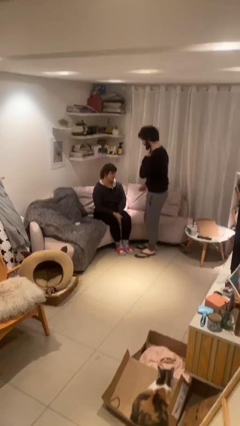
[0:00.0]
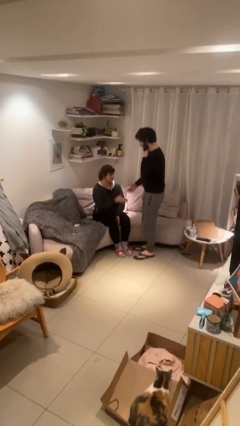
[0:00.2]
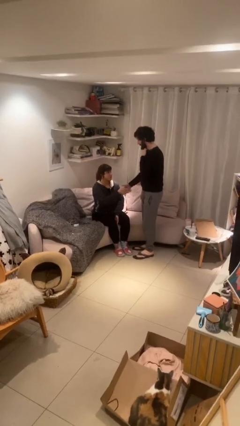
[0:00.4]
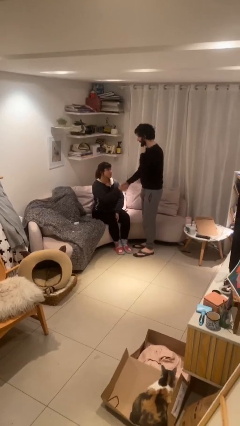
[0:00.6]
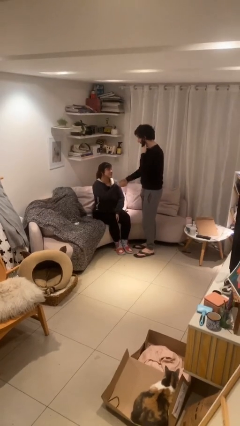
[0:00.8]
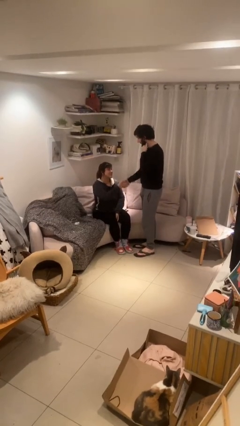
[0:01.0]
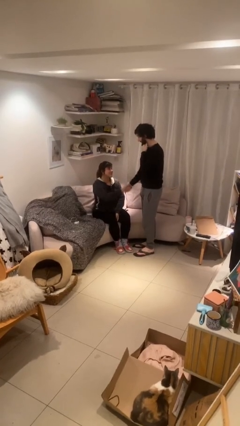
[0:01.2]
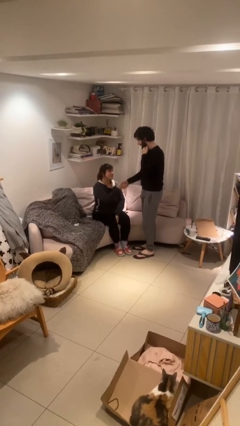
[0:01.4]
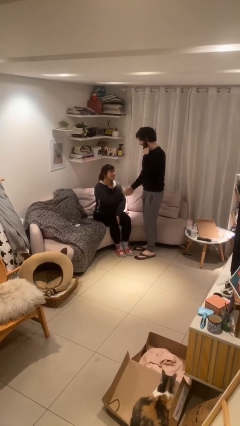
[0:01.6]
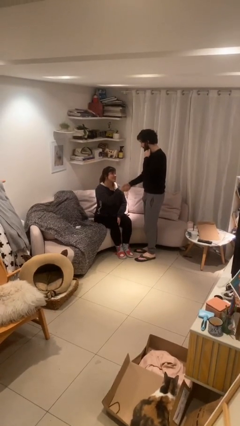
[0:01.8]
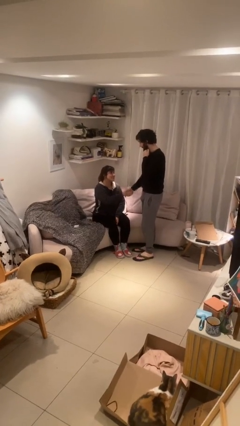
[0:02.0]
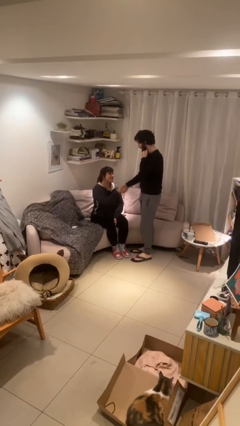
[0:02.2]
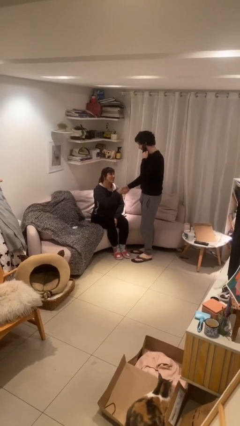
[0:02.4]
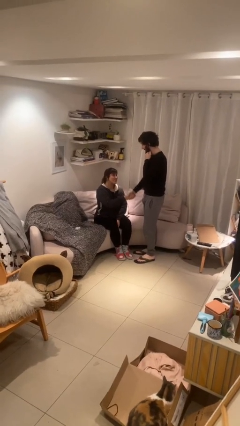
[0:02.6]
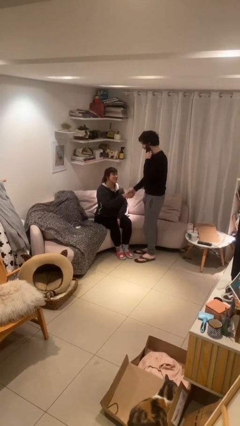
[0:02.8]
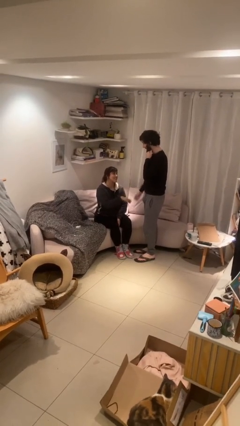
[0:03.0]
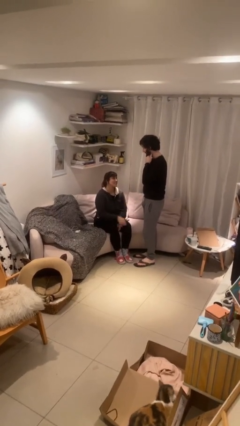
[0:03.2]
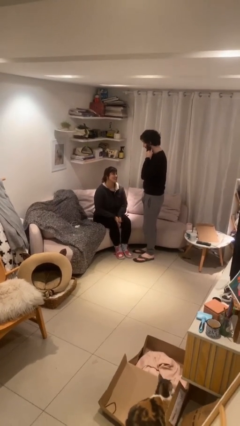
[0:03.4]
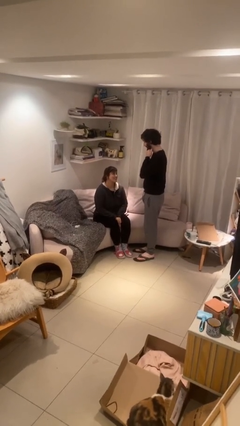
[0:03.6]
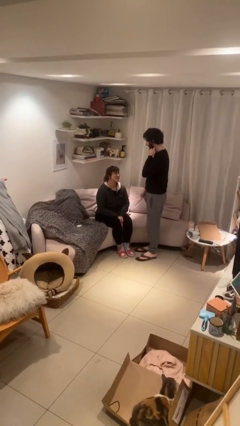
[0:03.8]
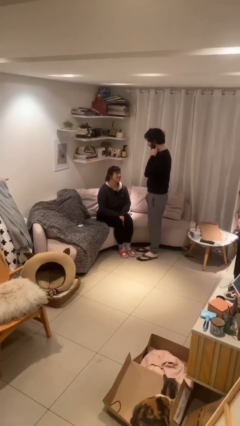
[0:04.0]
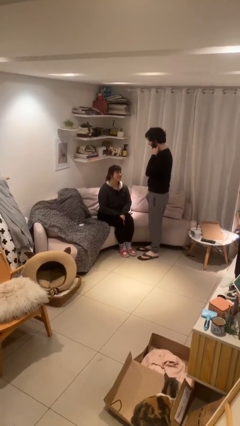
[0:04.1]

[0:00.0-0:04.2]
person shakes hand

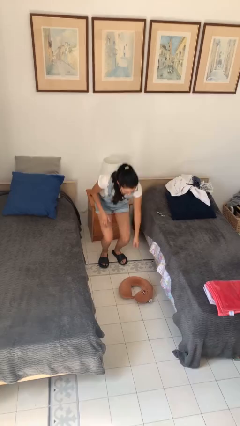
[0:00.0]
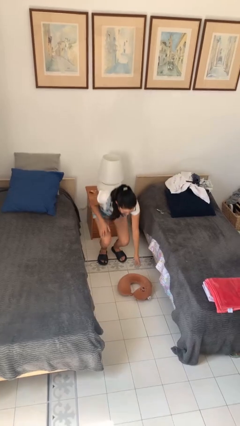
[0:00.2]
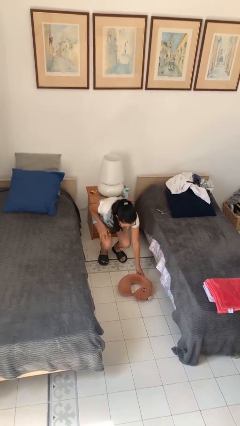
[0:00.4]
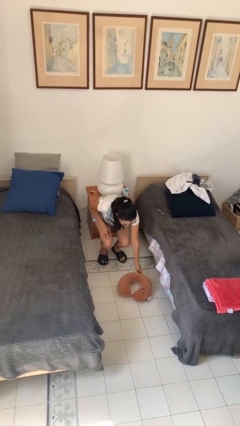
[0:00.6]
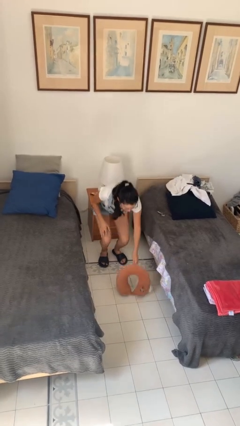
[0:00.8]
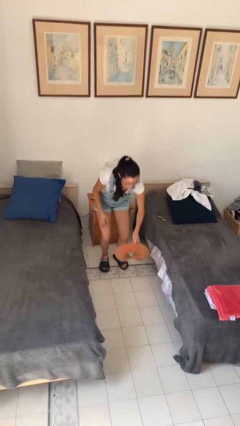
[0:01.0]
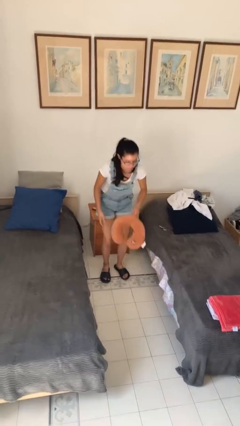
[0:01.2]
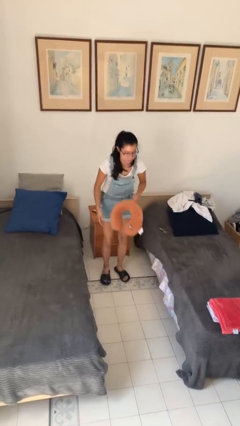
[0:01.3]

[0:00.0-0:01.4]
person picks up object from floor

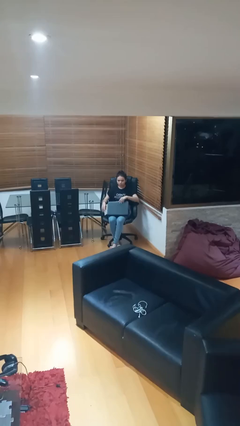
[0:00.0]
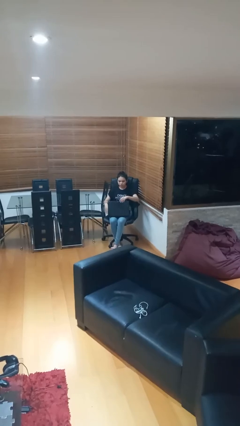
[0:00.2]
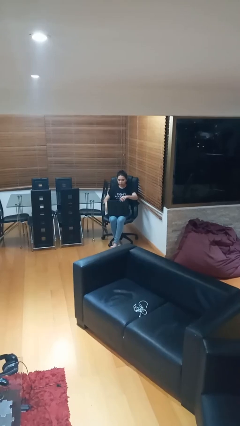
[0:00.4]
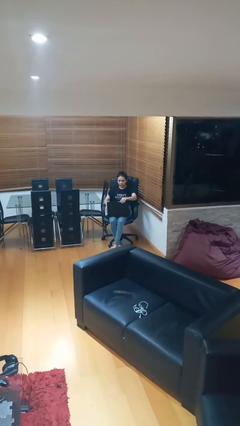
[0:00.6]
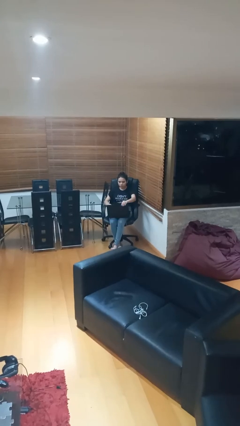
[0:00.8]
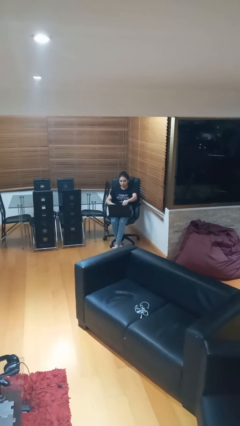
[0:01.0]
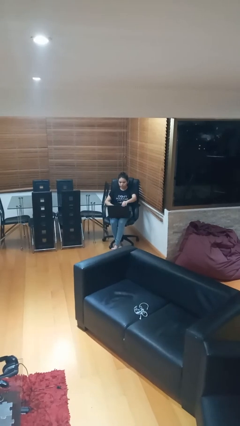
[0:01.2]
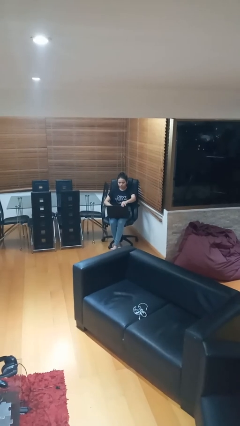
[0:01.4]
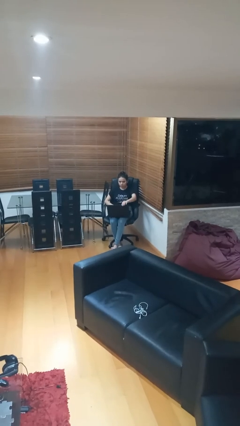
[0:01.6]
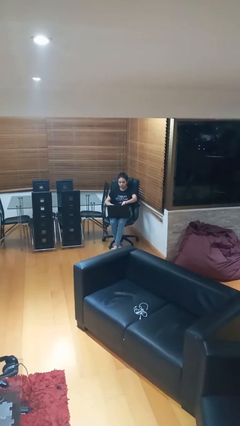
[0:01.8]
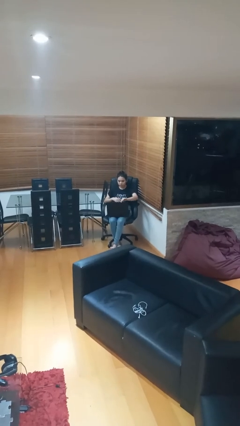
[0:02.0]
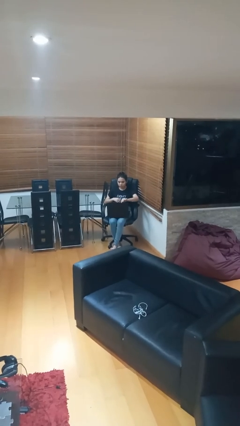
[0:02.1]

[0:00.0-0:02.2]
person interacts with laptop

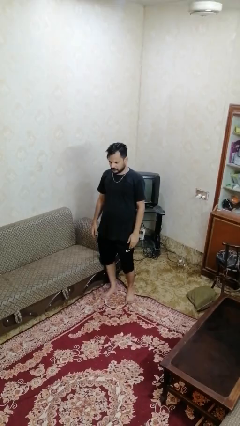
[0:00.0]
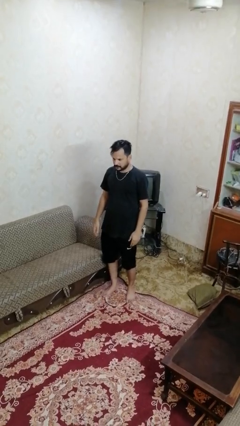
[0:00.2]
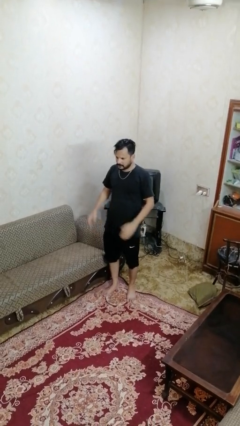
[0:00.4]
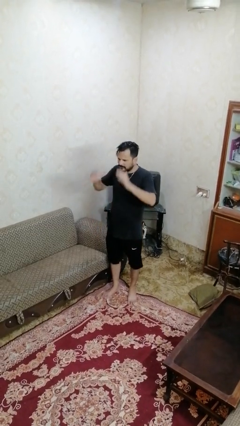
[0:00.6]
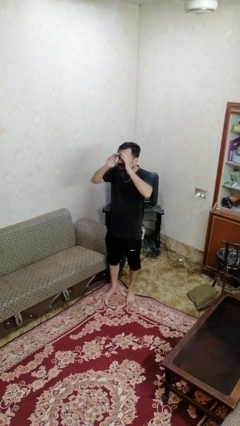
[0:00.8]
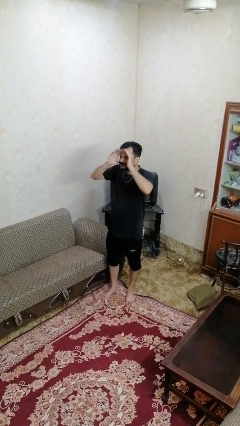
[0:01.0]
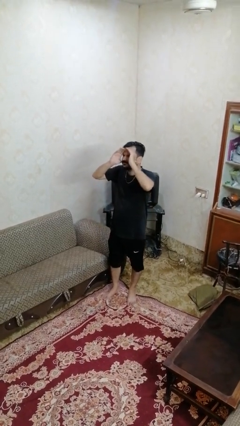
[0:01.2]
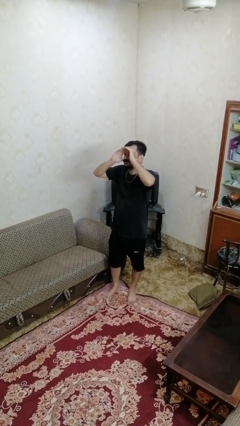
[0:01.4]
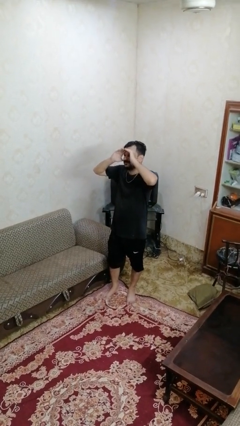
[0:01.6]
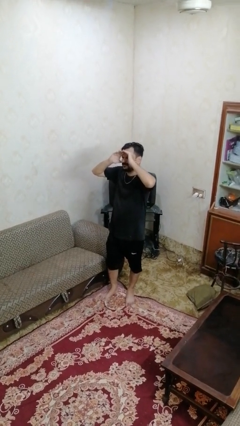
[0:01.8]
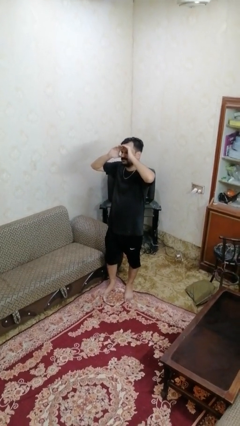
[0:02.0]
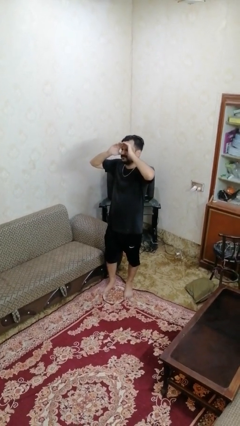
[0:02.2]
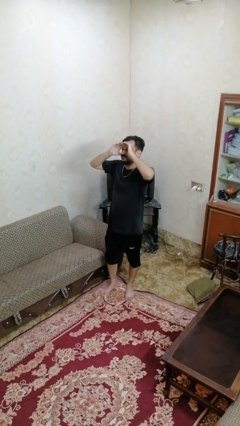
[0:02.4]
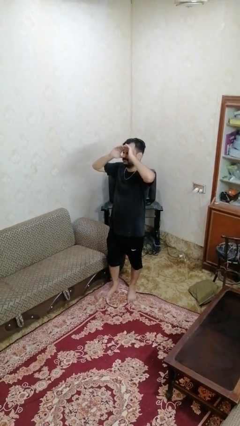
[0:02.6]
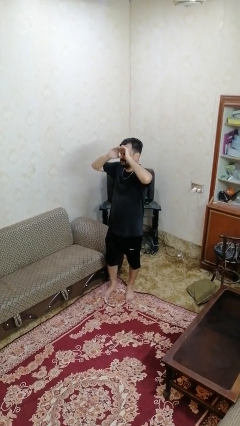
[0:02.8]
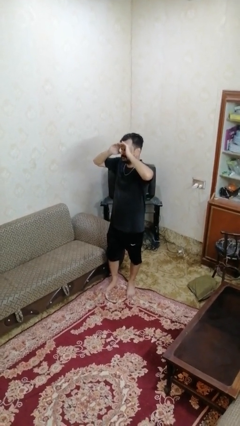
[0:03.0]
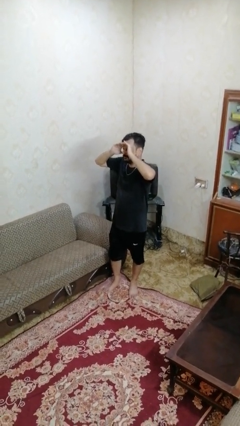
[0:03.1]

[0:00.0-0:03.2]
person shades eyes

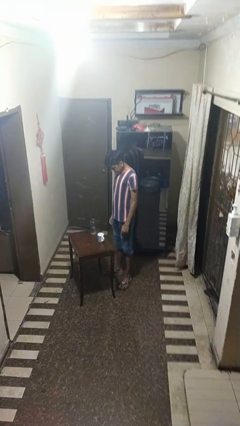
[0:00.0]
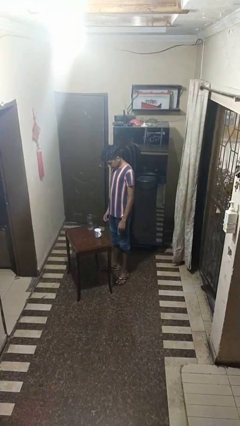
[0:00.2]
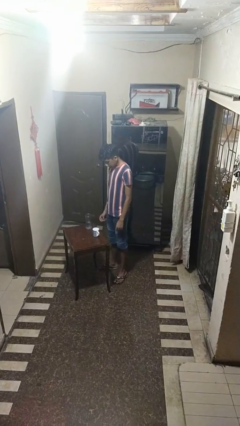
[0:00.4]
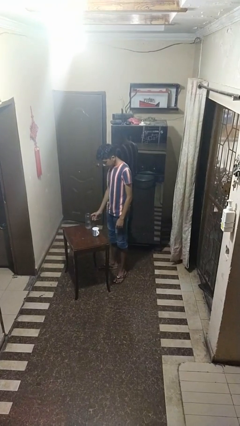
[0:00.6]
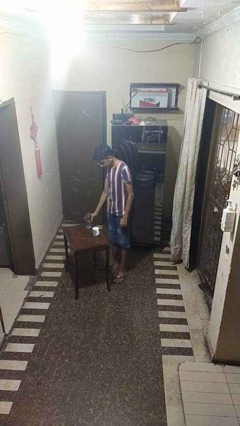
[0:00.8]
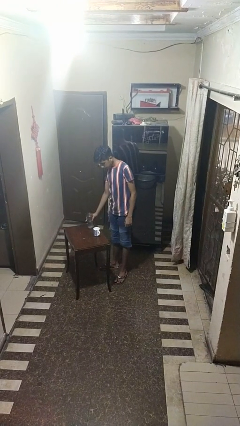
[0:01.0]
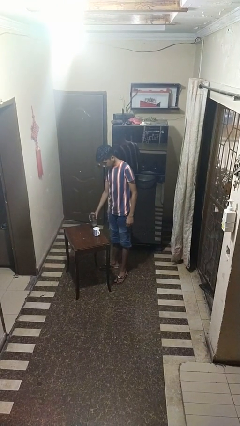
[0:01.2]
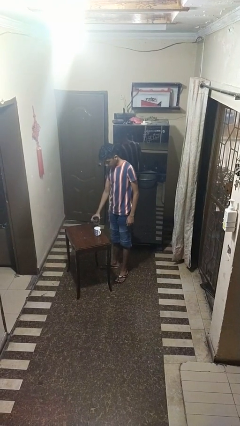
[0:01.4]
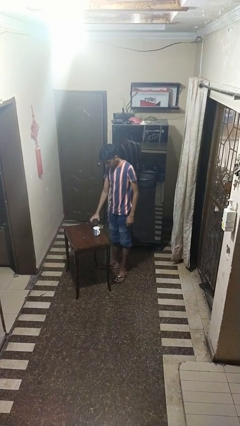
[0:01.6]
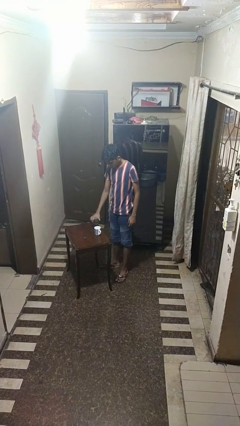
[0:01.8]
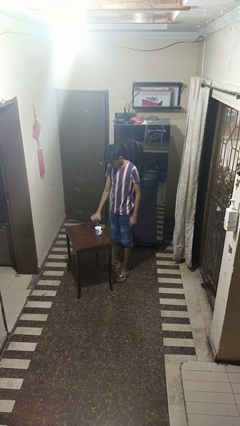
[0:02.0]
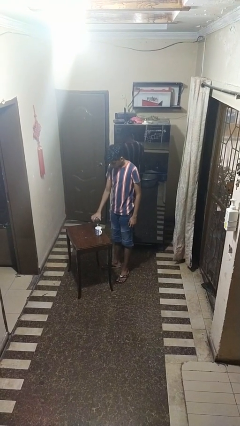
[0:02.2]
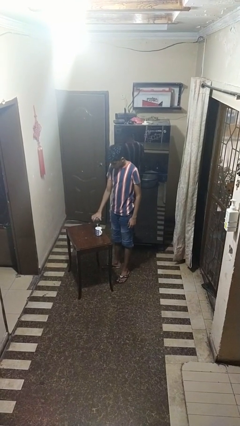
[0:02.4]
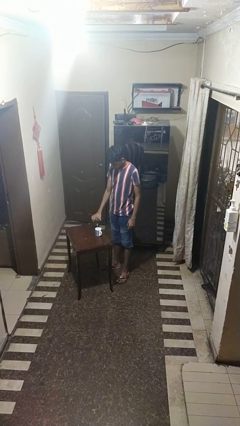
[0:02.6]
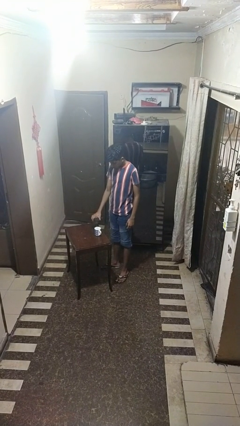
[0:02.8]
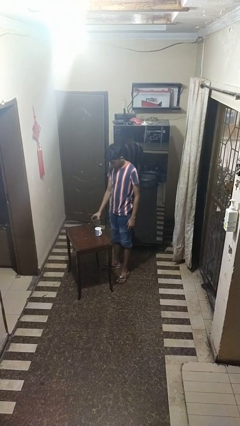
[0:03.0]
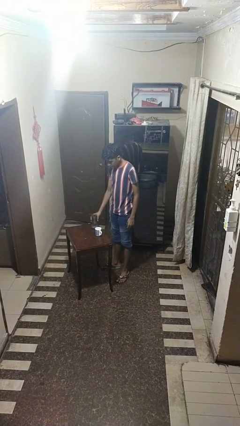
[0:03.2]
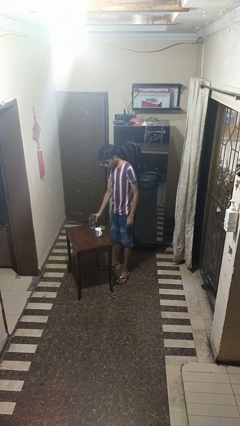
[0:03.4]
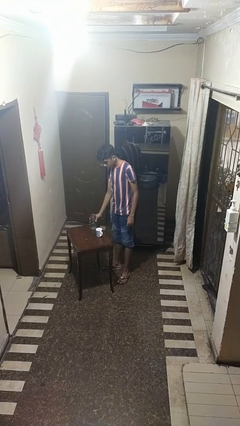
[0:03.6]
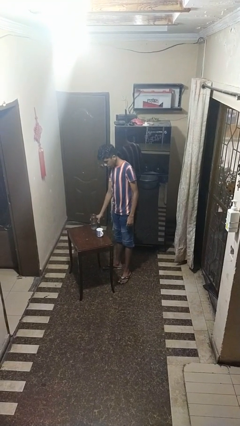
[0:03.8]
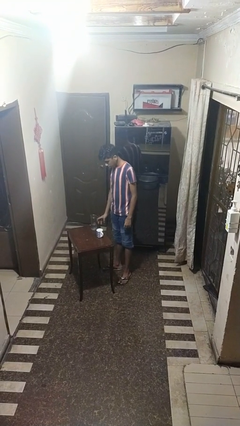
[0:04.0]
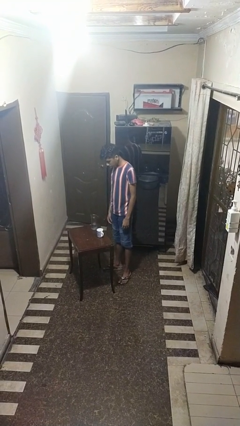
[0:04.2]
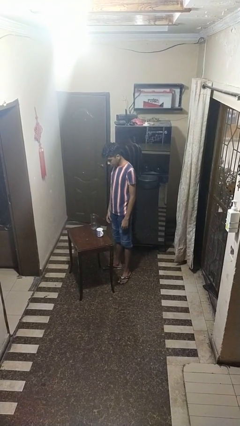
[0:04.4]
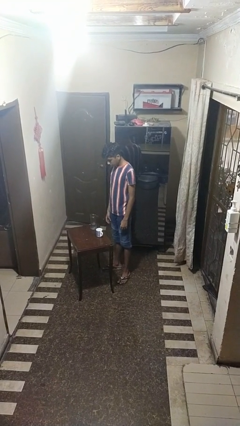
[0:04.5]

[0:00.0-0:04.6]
person pours liquid into cup

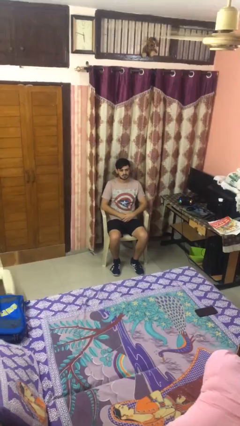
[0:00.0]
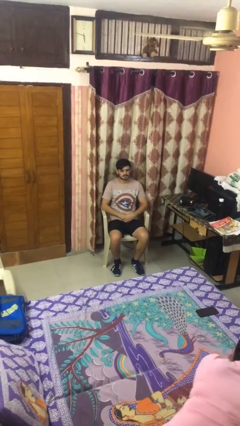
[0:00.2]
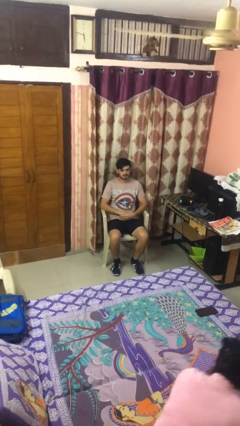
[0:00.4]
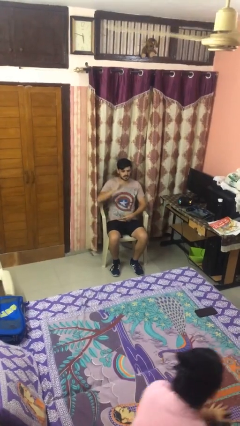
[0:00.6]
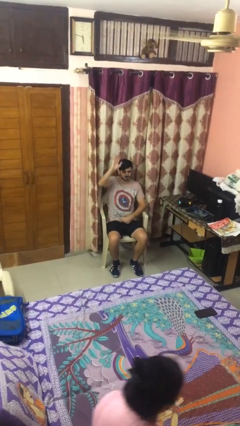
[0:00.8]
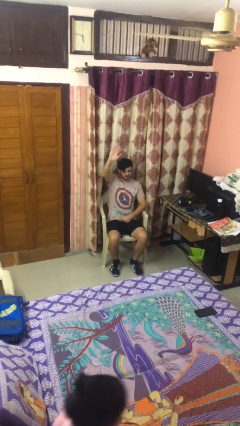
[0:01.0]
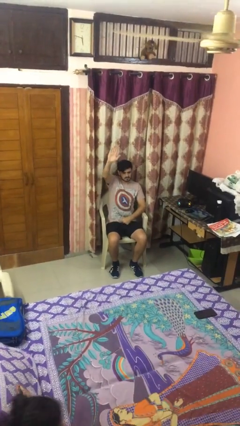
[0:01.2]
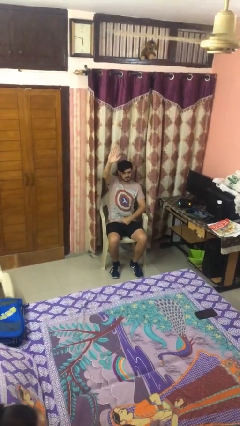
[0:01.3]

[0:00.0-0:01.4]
person gestures raise hand
